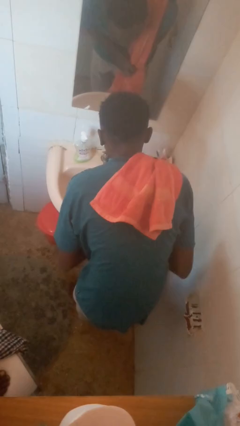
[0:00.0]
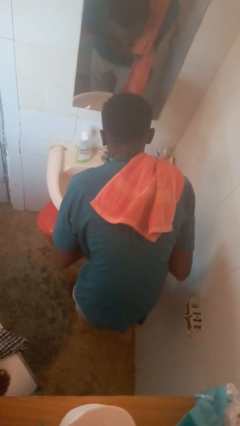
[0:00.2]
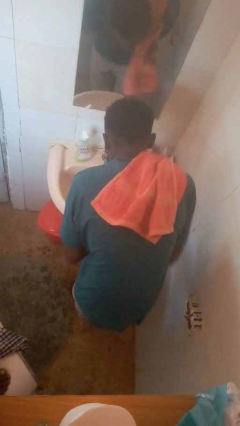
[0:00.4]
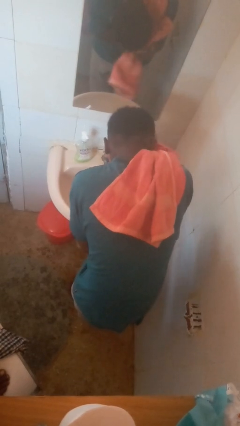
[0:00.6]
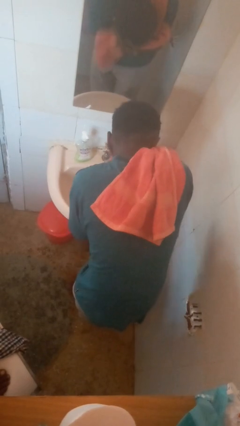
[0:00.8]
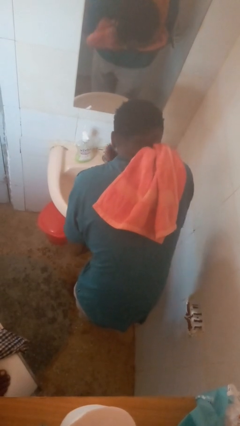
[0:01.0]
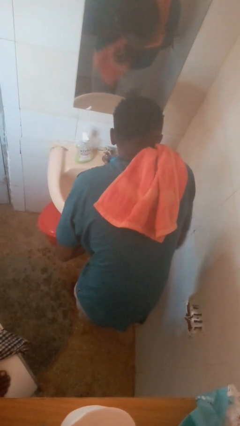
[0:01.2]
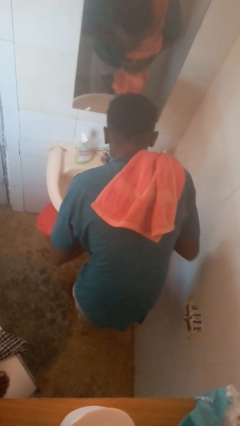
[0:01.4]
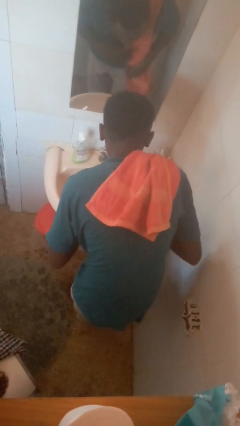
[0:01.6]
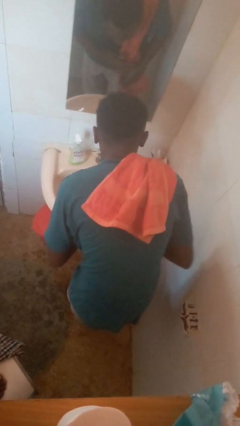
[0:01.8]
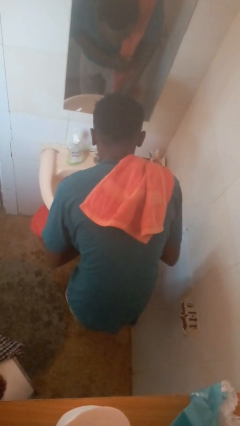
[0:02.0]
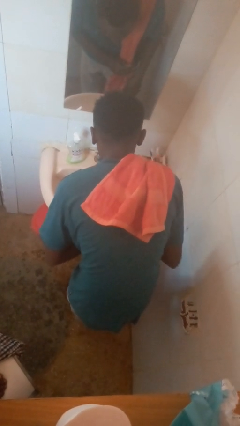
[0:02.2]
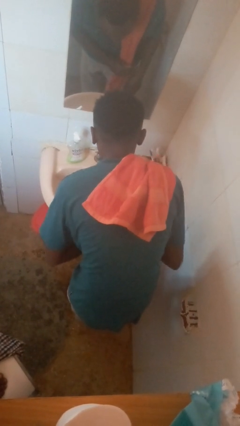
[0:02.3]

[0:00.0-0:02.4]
person dries face with towel

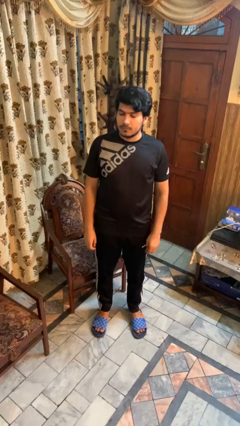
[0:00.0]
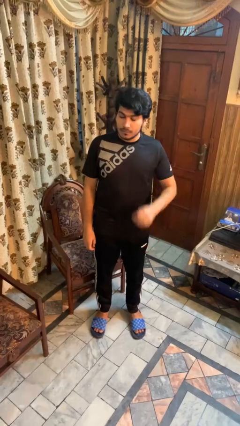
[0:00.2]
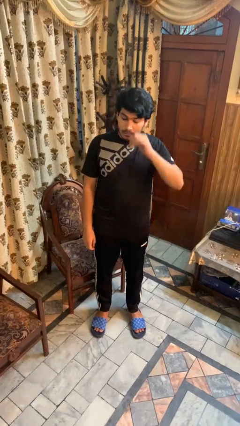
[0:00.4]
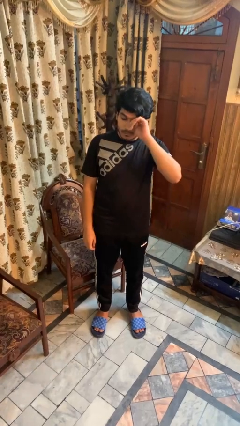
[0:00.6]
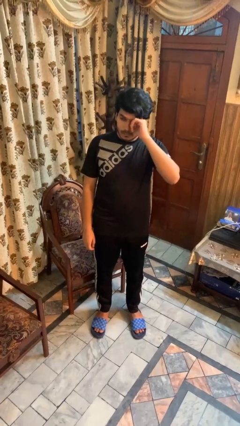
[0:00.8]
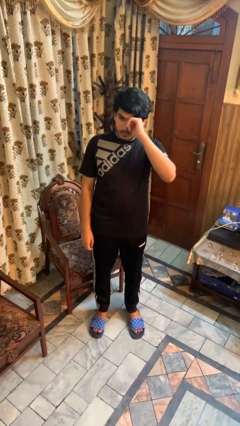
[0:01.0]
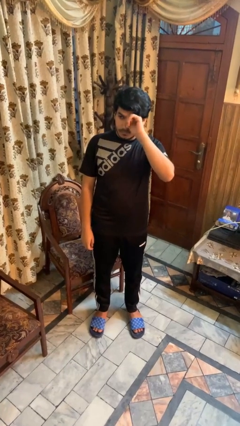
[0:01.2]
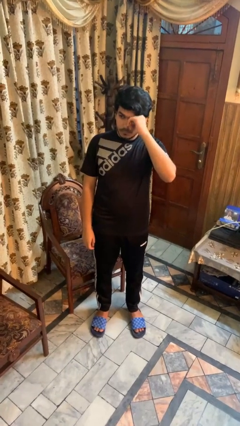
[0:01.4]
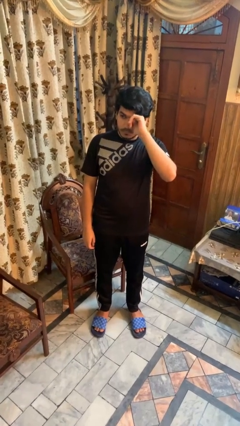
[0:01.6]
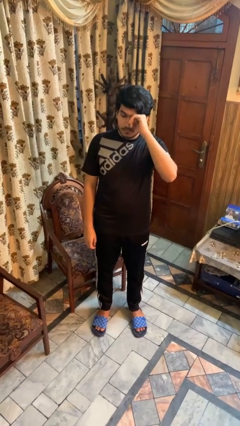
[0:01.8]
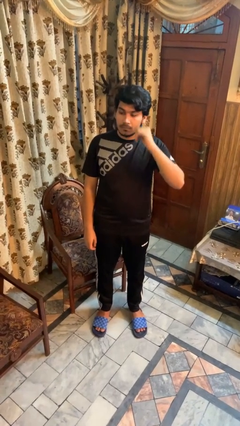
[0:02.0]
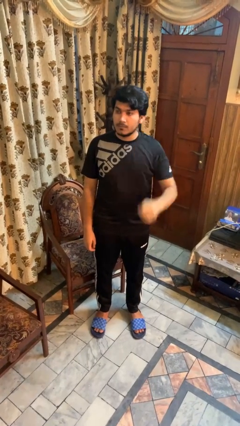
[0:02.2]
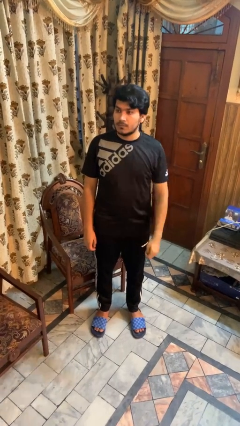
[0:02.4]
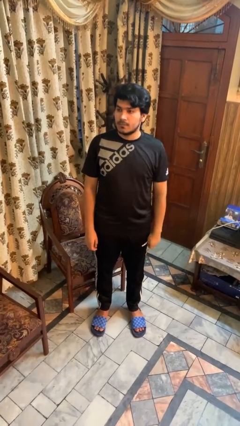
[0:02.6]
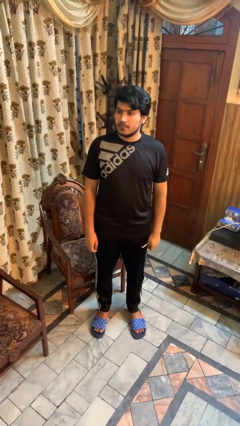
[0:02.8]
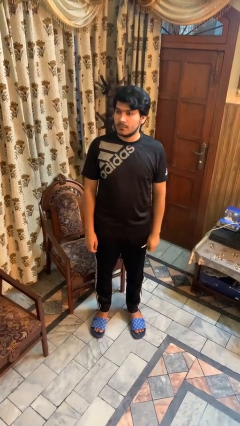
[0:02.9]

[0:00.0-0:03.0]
person rubs eyes

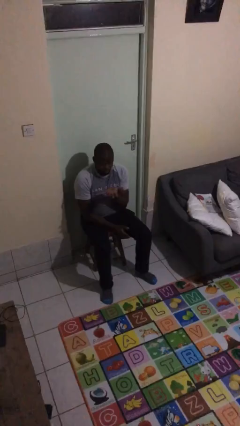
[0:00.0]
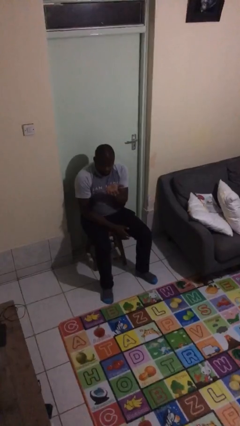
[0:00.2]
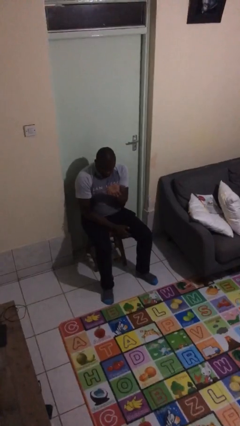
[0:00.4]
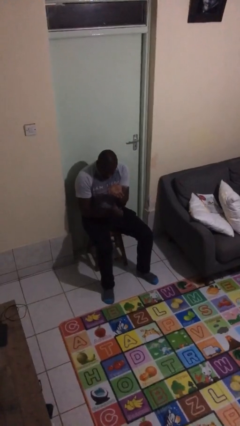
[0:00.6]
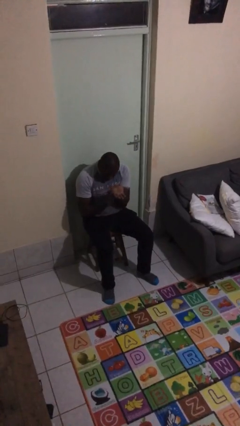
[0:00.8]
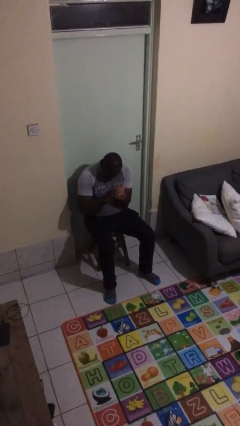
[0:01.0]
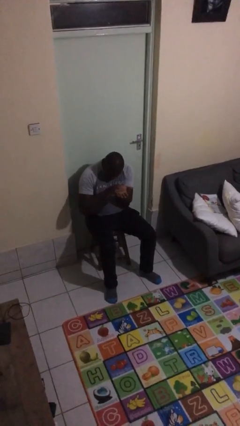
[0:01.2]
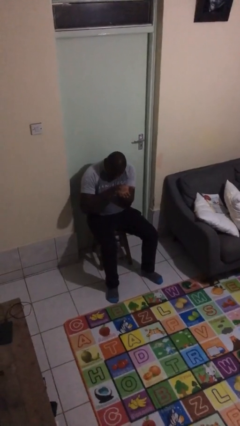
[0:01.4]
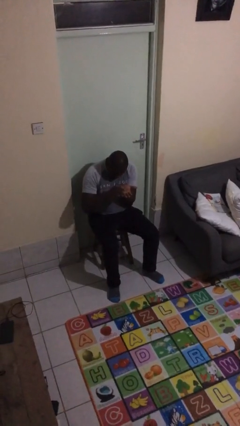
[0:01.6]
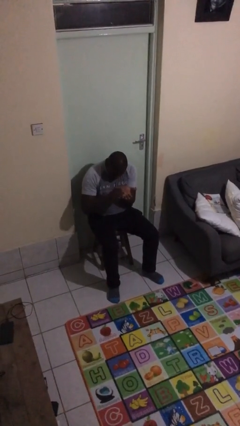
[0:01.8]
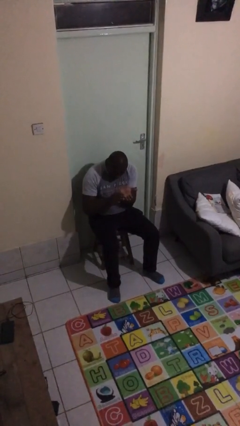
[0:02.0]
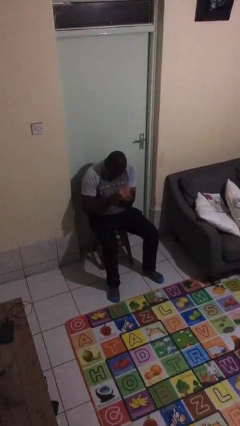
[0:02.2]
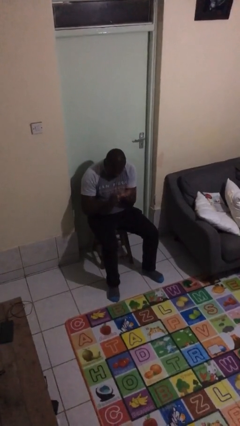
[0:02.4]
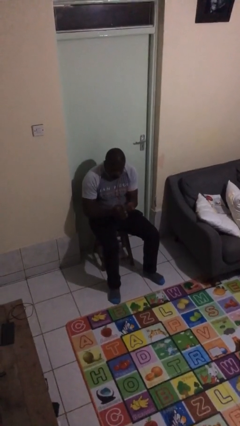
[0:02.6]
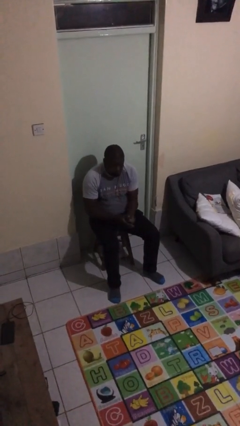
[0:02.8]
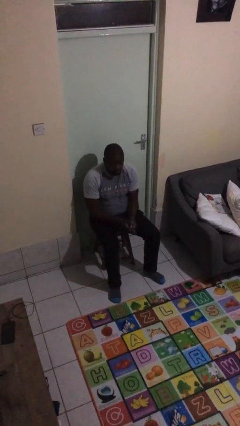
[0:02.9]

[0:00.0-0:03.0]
person looks at hands in lap

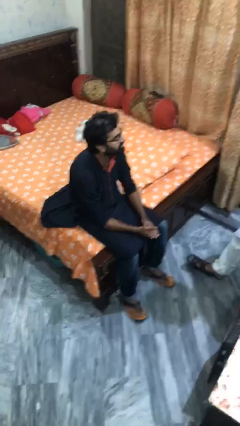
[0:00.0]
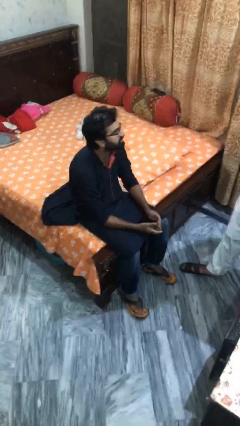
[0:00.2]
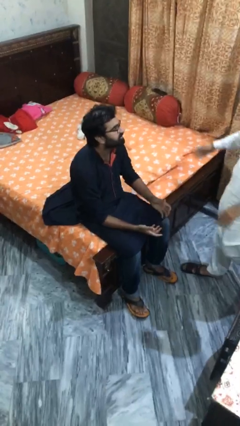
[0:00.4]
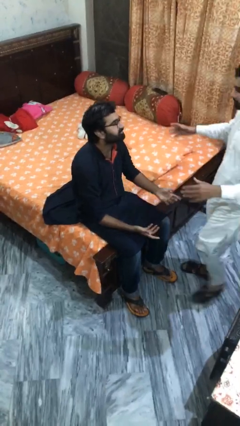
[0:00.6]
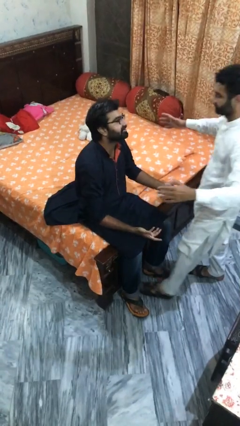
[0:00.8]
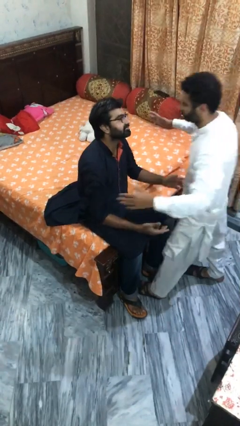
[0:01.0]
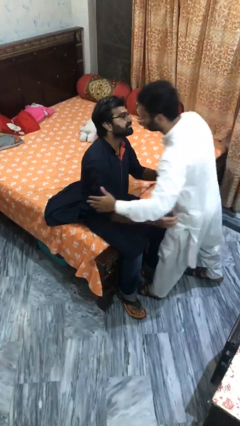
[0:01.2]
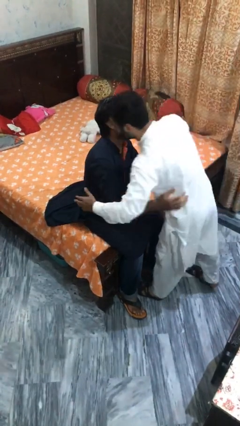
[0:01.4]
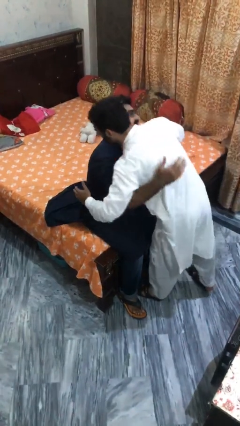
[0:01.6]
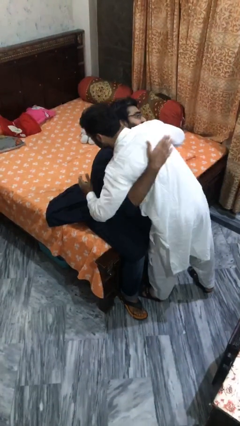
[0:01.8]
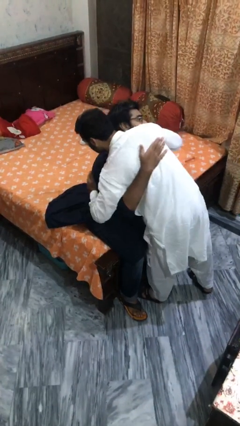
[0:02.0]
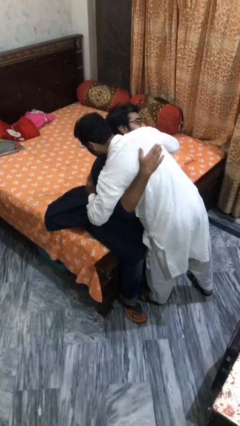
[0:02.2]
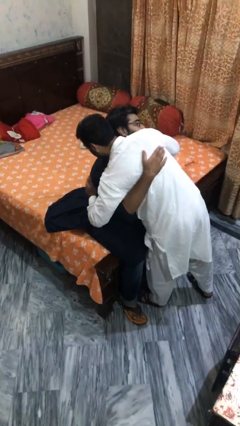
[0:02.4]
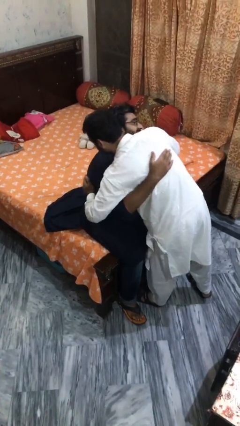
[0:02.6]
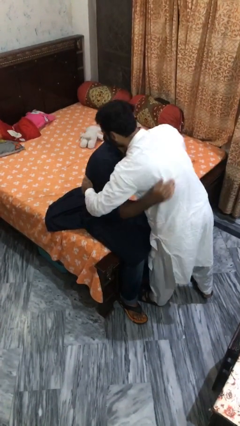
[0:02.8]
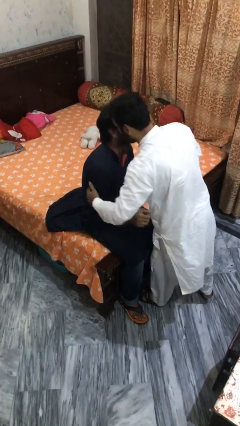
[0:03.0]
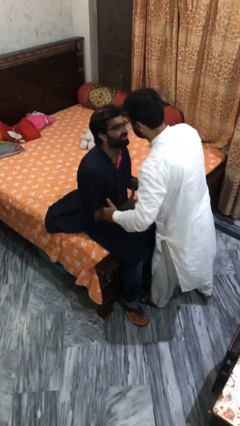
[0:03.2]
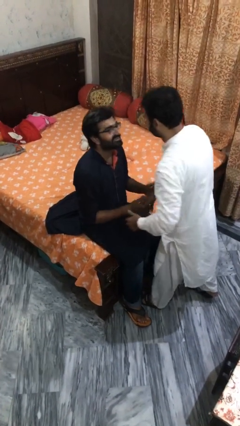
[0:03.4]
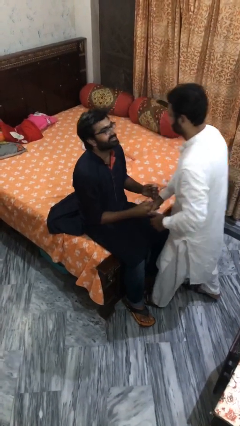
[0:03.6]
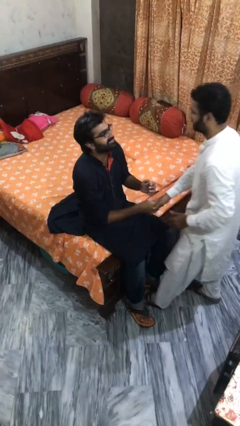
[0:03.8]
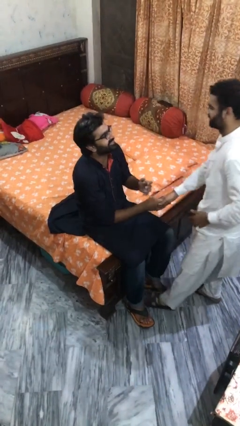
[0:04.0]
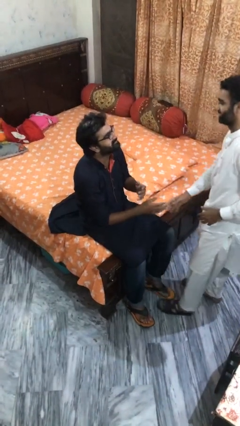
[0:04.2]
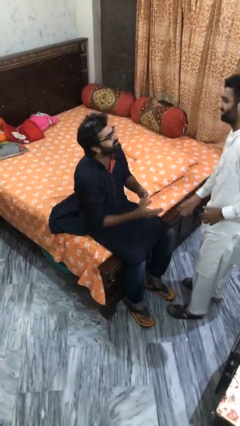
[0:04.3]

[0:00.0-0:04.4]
person embraces person

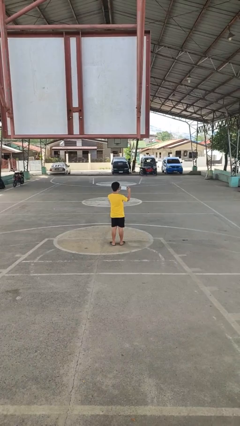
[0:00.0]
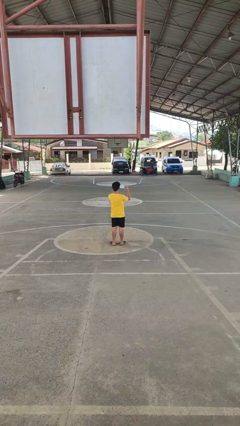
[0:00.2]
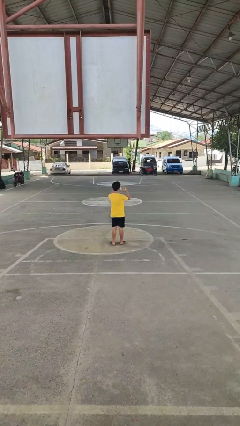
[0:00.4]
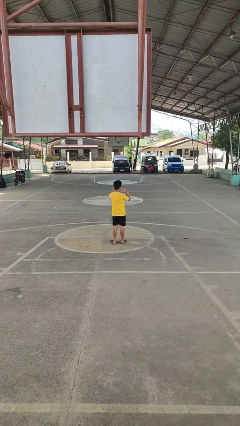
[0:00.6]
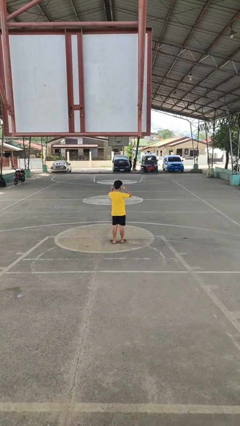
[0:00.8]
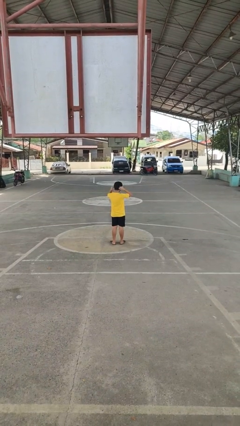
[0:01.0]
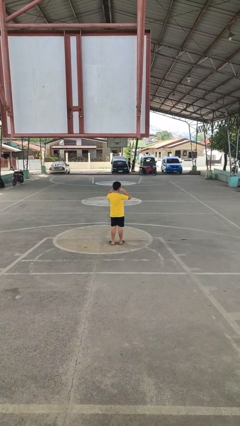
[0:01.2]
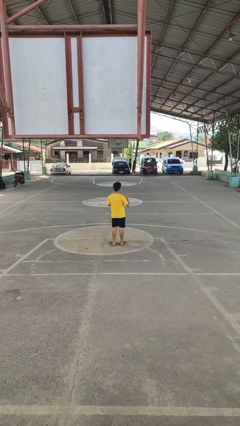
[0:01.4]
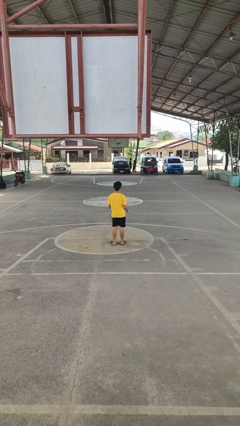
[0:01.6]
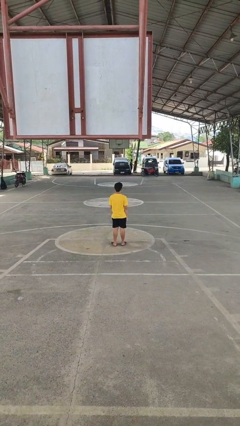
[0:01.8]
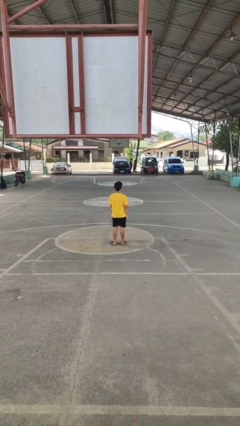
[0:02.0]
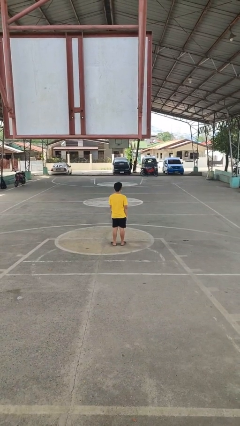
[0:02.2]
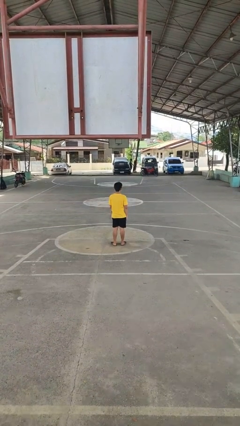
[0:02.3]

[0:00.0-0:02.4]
person puts on facemask

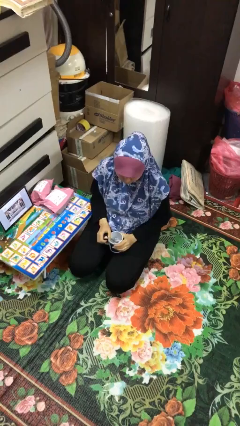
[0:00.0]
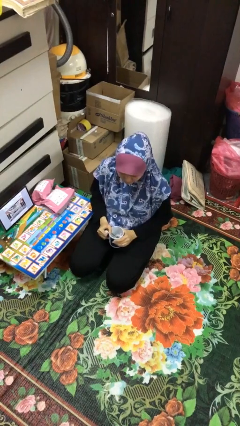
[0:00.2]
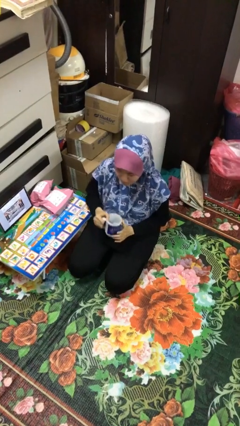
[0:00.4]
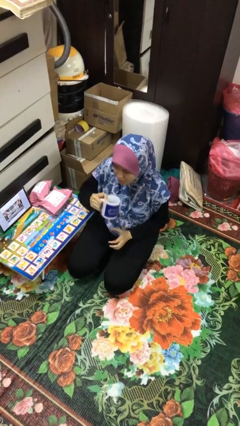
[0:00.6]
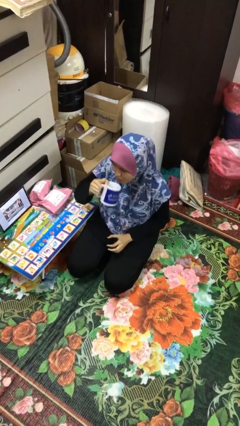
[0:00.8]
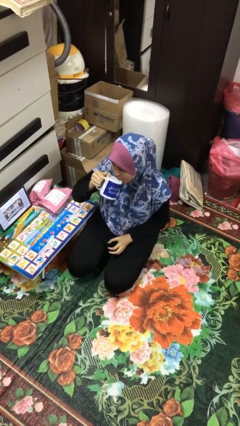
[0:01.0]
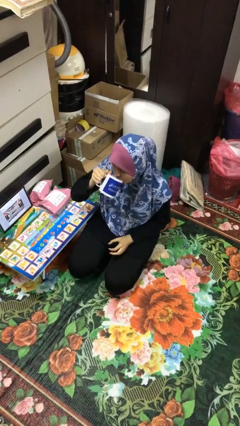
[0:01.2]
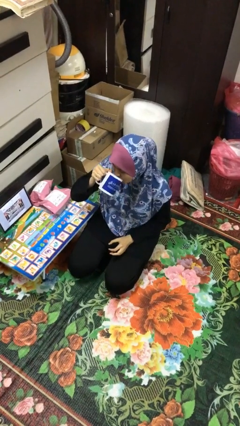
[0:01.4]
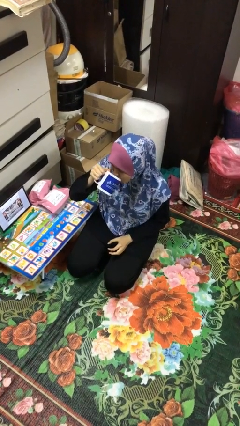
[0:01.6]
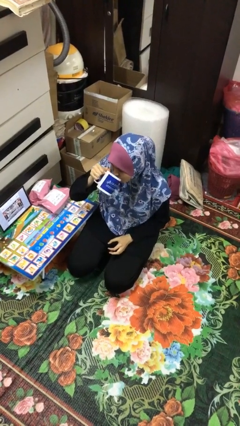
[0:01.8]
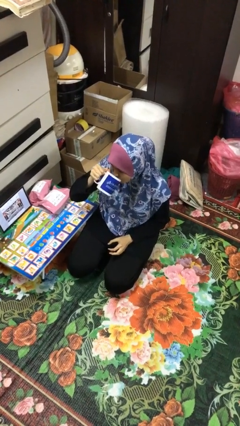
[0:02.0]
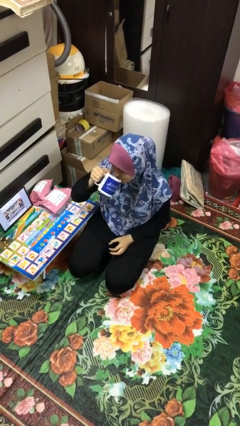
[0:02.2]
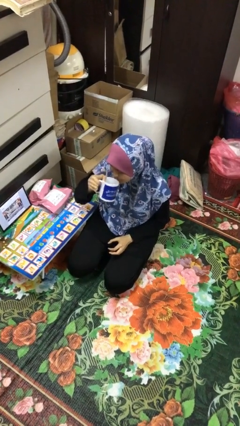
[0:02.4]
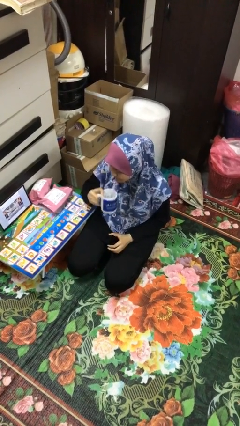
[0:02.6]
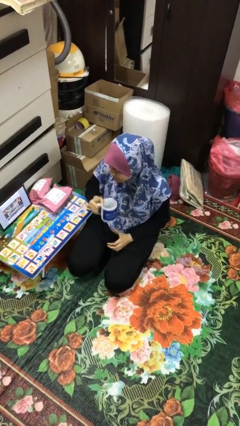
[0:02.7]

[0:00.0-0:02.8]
person drinks from mug
